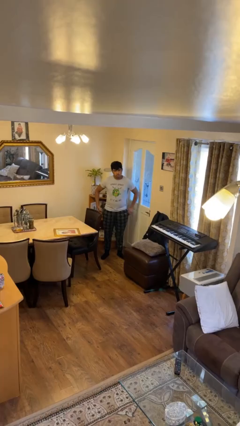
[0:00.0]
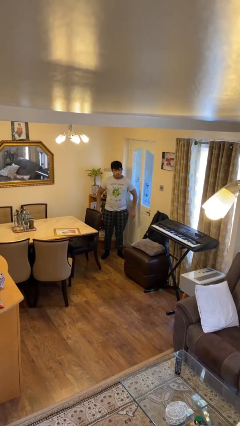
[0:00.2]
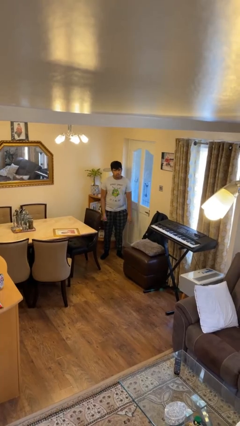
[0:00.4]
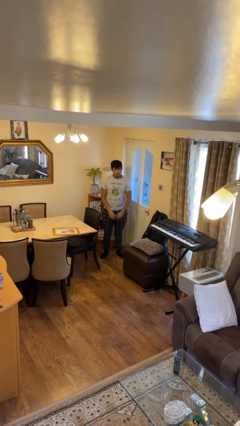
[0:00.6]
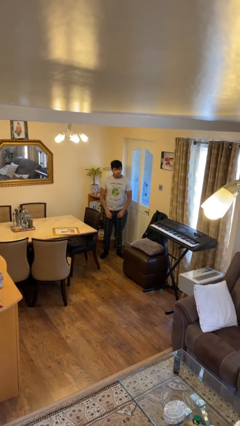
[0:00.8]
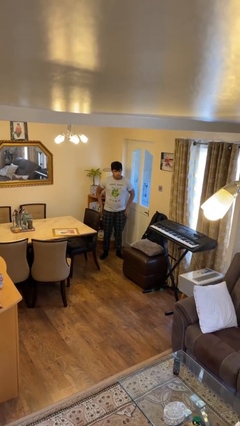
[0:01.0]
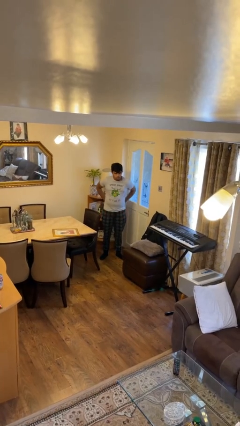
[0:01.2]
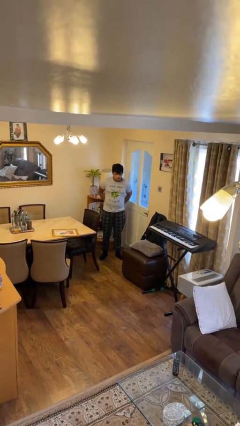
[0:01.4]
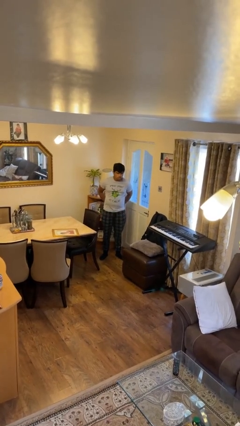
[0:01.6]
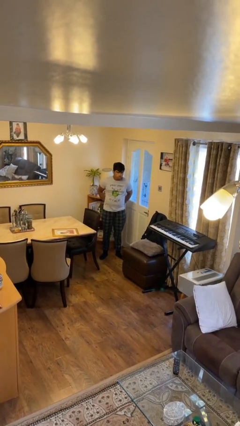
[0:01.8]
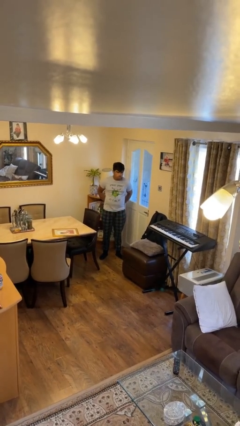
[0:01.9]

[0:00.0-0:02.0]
person puts hands in back pockets

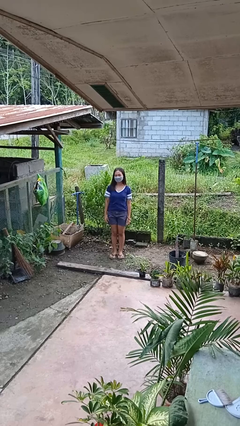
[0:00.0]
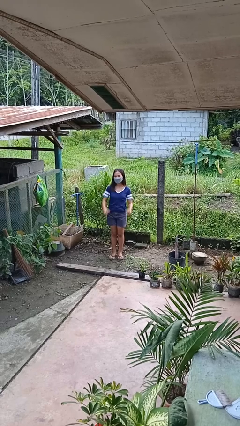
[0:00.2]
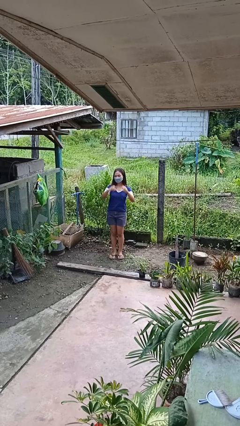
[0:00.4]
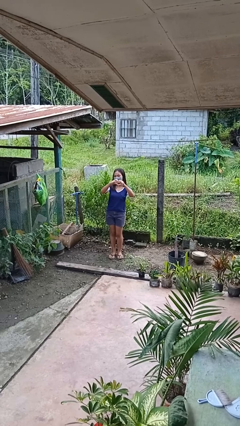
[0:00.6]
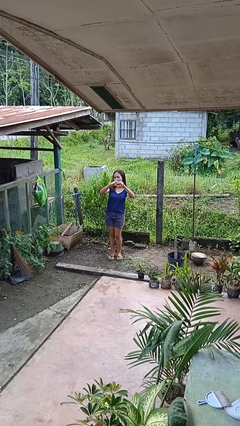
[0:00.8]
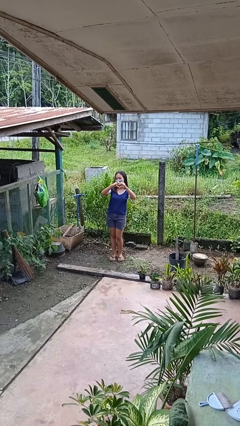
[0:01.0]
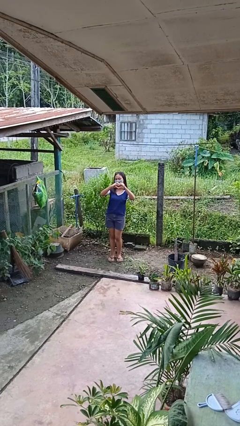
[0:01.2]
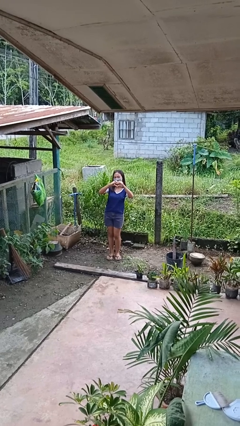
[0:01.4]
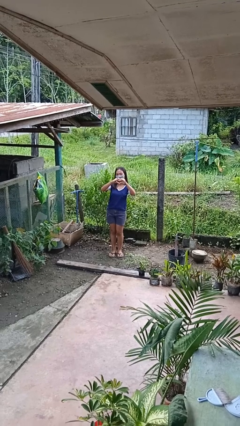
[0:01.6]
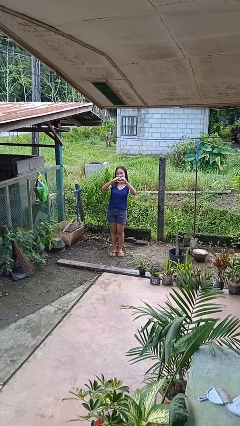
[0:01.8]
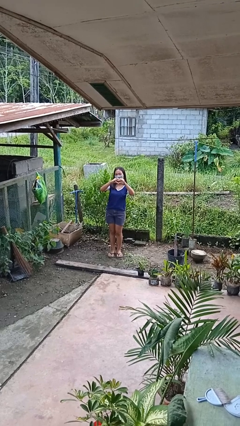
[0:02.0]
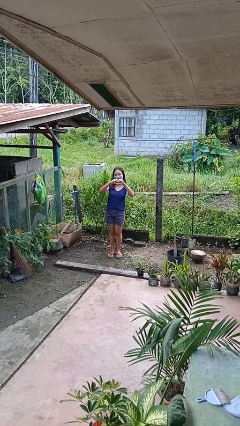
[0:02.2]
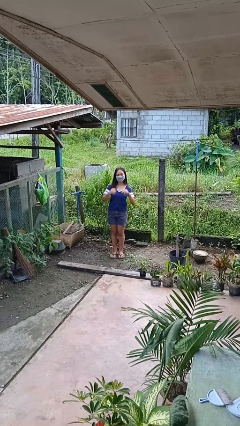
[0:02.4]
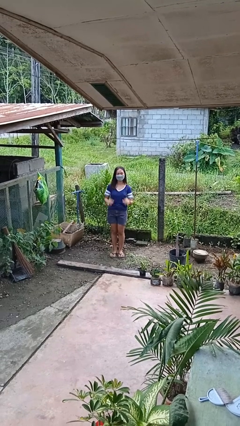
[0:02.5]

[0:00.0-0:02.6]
person gestures heart

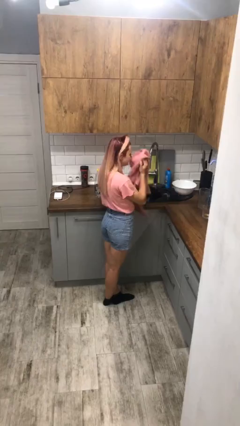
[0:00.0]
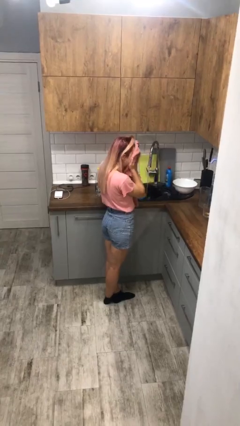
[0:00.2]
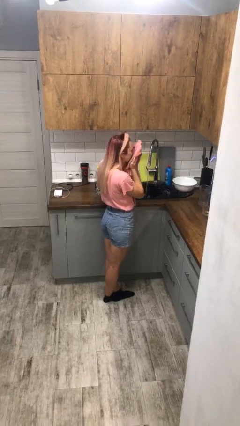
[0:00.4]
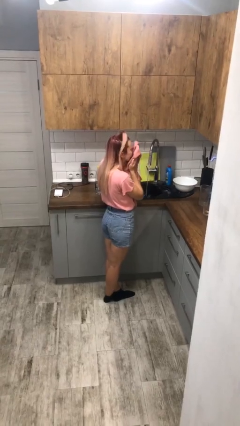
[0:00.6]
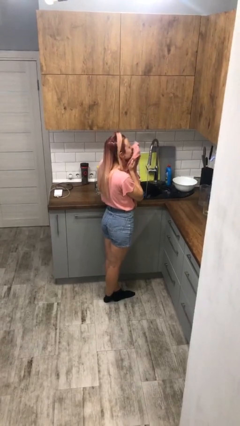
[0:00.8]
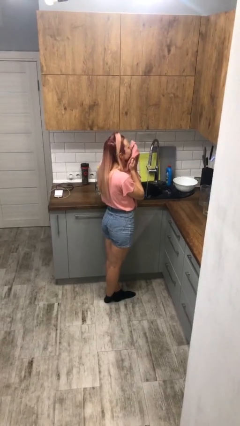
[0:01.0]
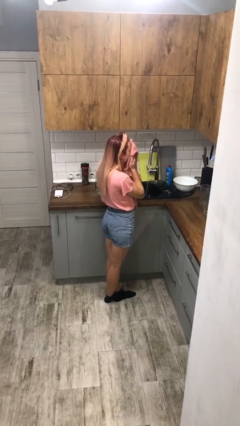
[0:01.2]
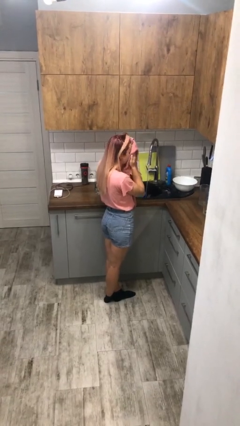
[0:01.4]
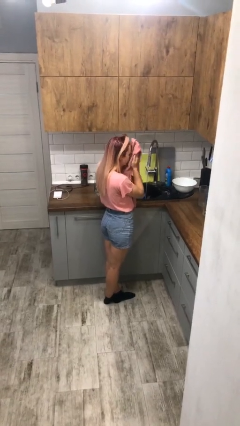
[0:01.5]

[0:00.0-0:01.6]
person dries face with towel

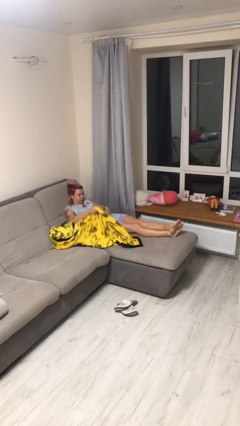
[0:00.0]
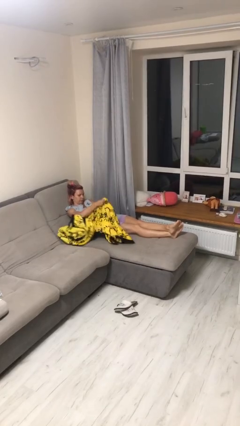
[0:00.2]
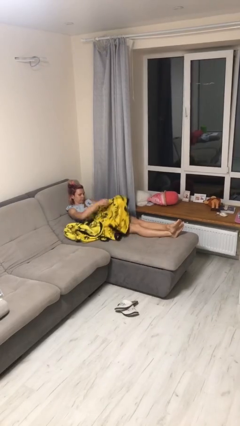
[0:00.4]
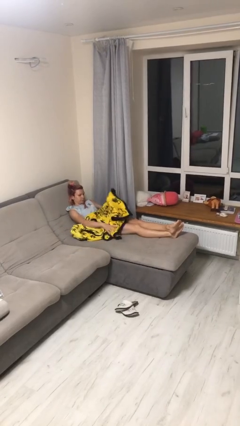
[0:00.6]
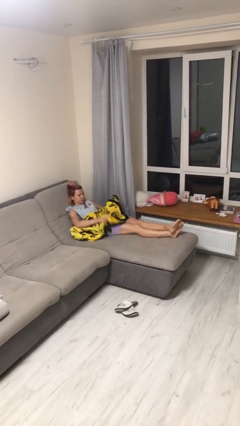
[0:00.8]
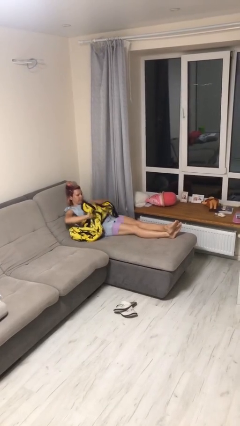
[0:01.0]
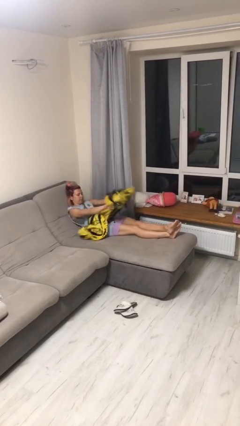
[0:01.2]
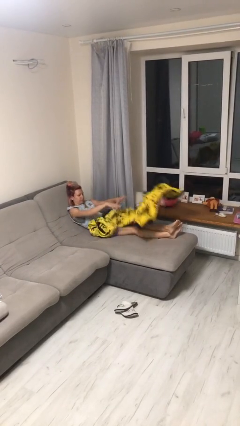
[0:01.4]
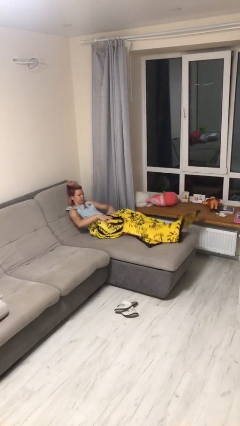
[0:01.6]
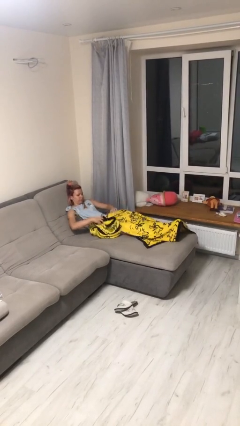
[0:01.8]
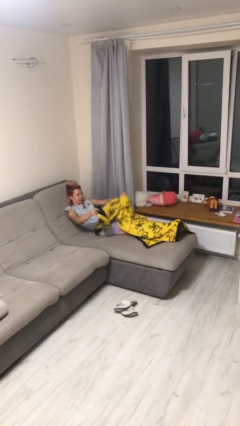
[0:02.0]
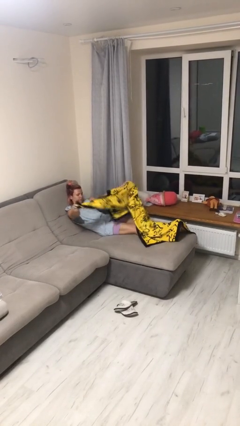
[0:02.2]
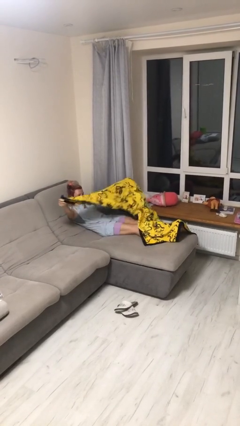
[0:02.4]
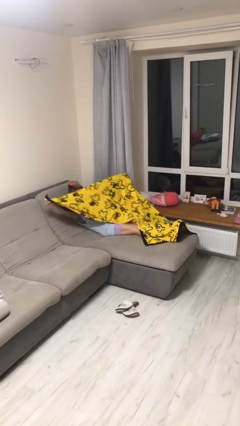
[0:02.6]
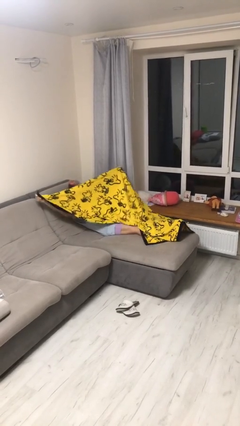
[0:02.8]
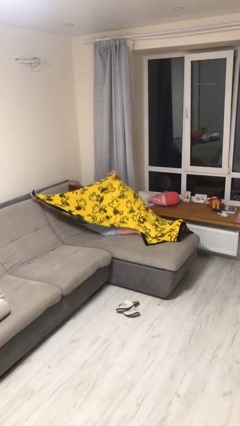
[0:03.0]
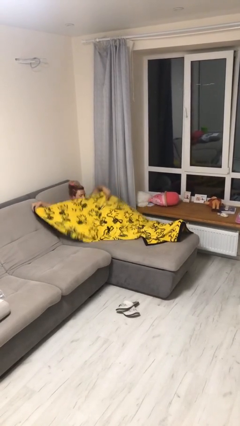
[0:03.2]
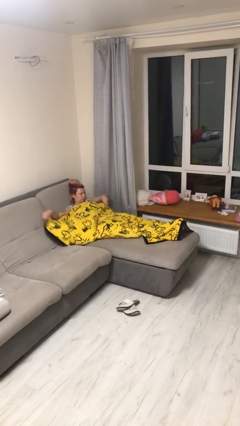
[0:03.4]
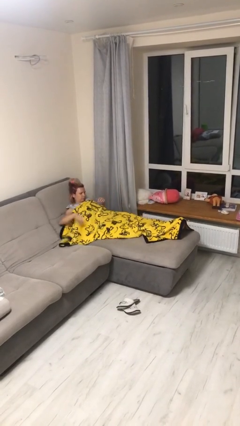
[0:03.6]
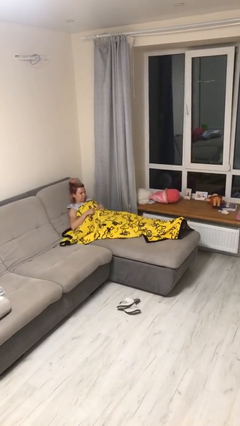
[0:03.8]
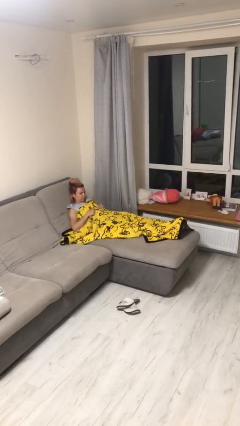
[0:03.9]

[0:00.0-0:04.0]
person covers with blanket

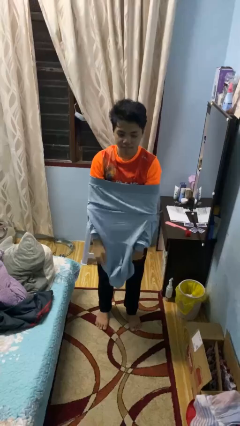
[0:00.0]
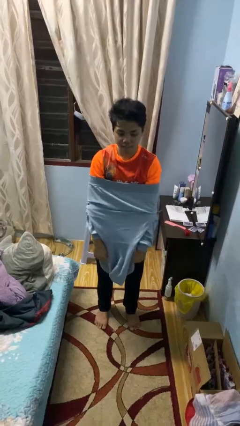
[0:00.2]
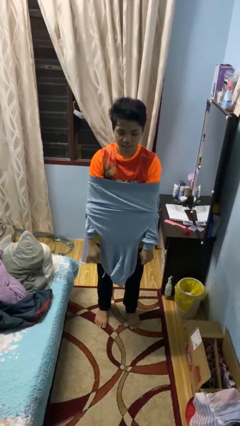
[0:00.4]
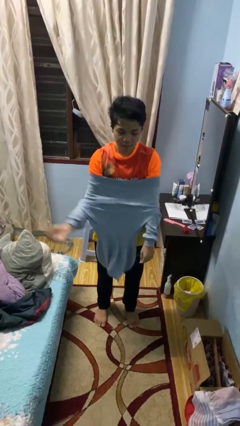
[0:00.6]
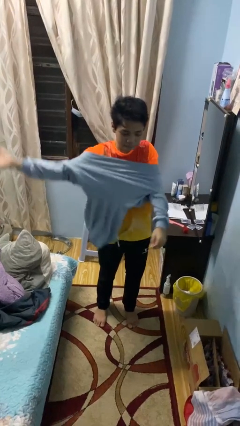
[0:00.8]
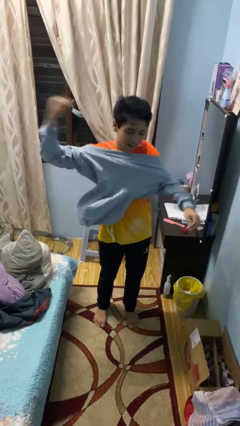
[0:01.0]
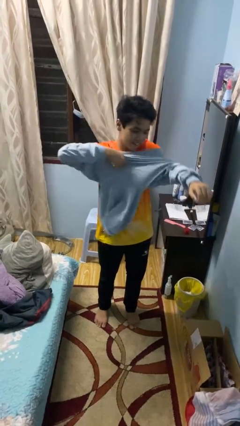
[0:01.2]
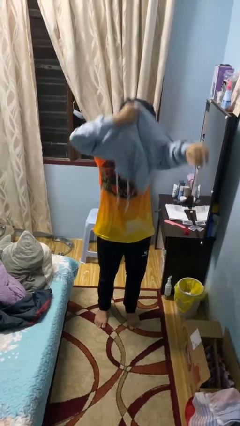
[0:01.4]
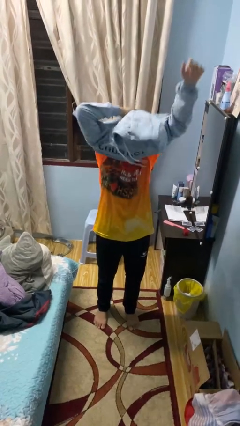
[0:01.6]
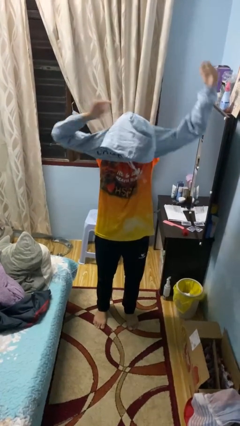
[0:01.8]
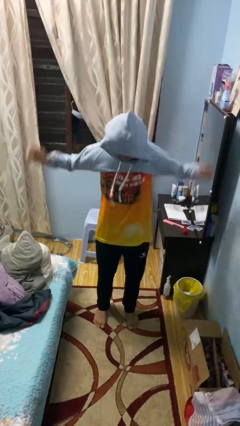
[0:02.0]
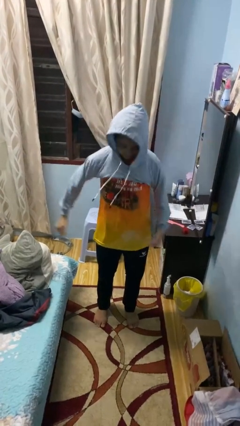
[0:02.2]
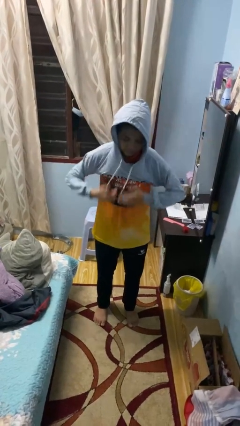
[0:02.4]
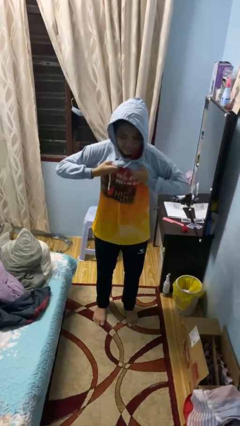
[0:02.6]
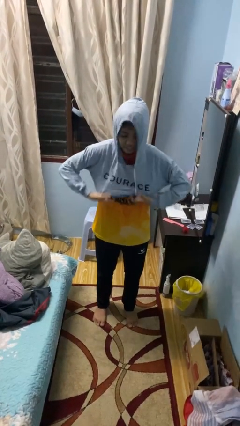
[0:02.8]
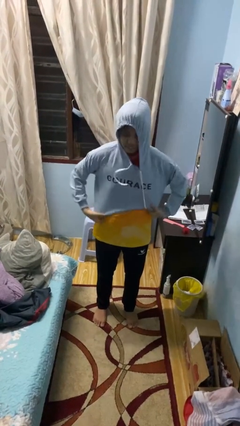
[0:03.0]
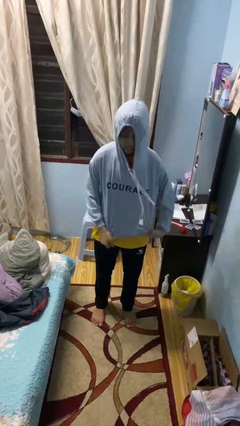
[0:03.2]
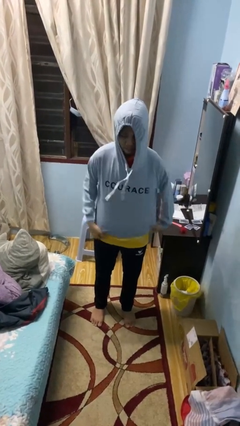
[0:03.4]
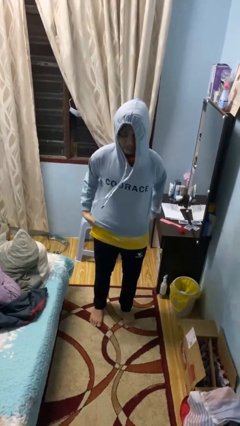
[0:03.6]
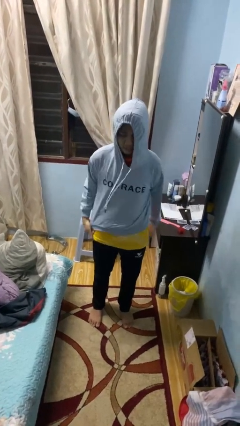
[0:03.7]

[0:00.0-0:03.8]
person puts on hoodie

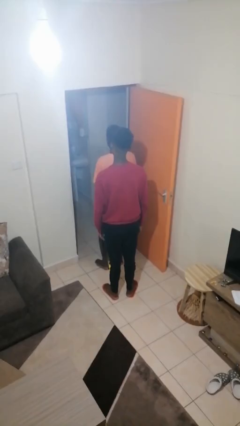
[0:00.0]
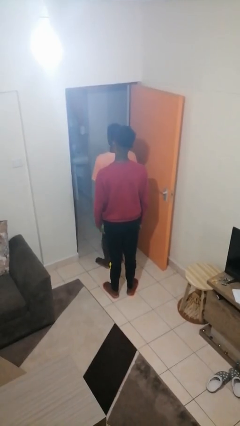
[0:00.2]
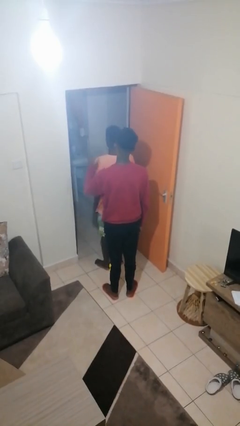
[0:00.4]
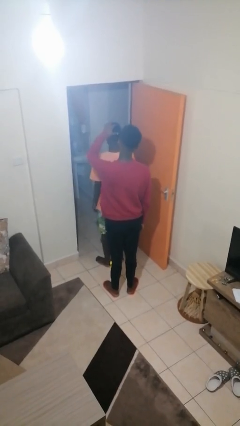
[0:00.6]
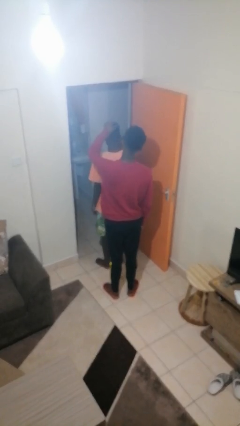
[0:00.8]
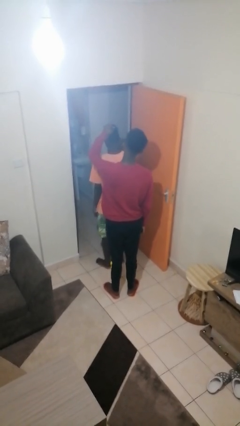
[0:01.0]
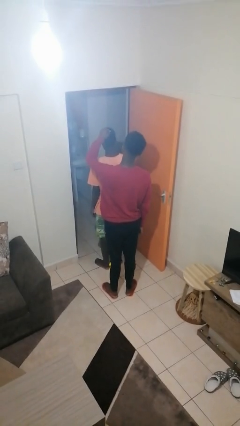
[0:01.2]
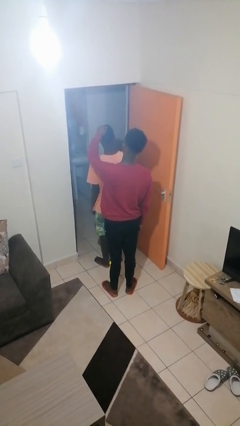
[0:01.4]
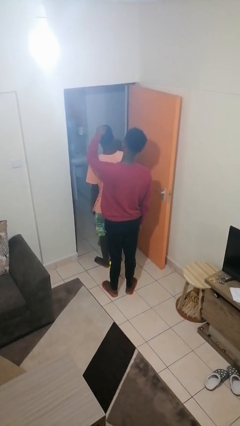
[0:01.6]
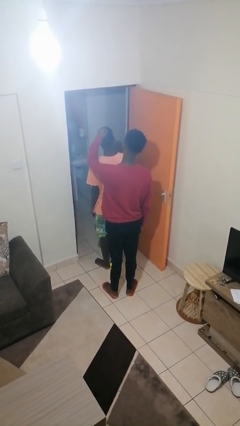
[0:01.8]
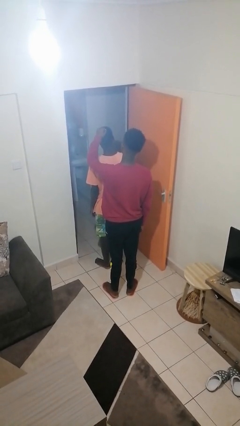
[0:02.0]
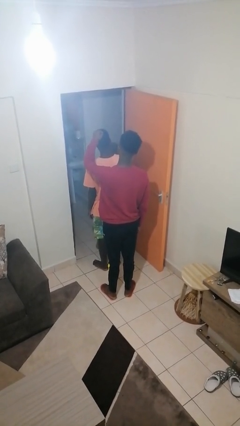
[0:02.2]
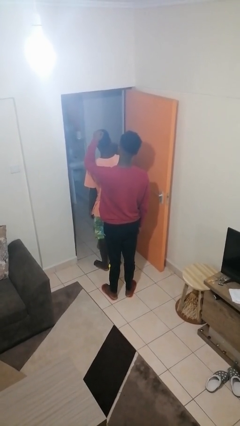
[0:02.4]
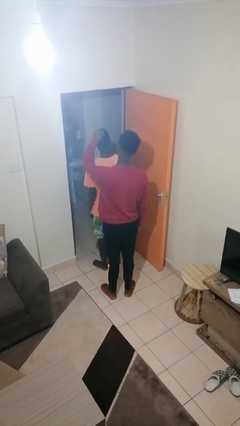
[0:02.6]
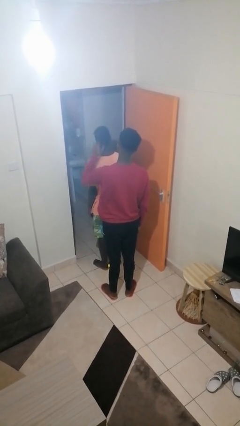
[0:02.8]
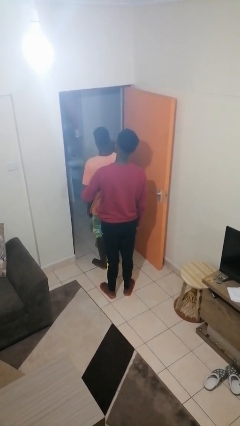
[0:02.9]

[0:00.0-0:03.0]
person grabs person by hair

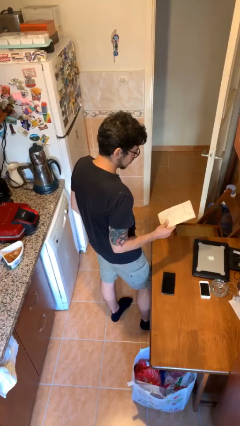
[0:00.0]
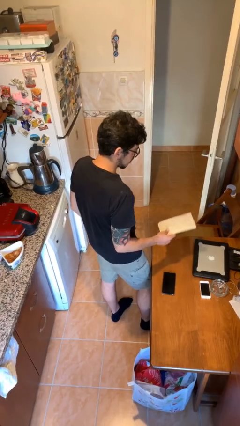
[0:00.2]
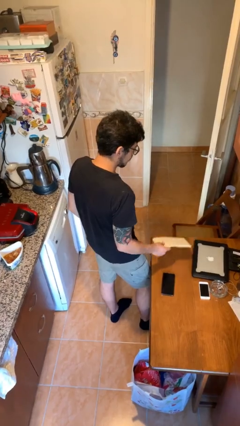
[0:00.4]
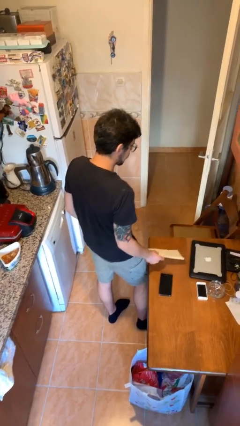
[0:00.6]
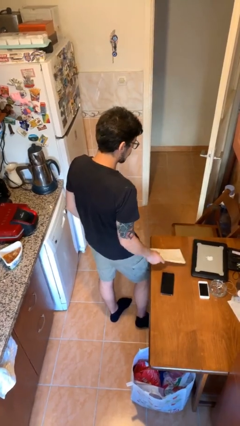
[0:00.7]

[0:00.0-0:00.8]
person puts down object on table
